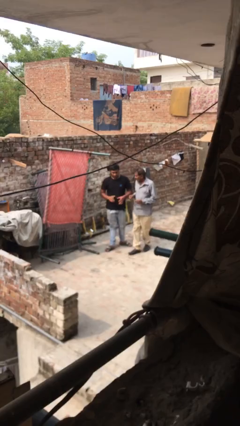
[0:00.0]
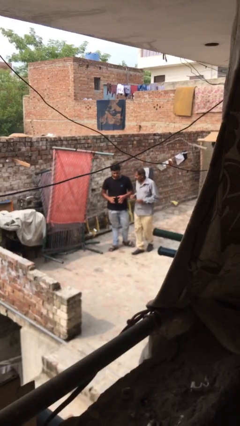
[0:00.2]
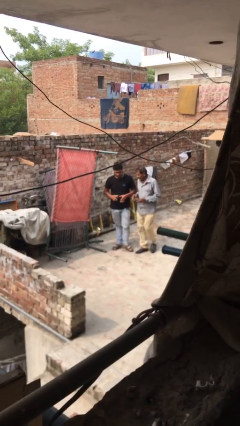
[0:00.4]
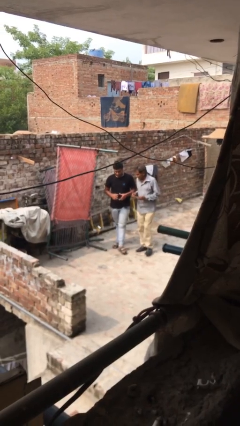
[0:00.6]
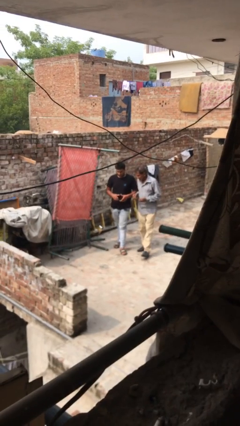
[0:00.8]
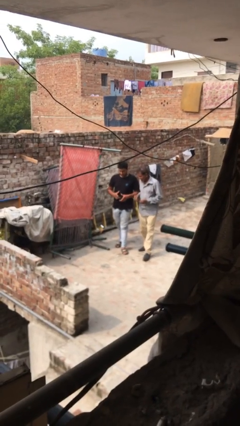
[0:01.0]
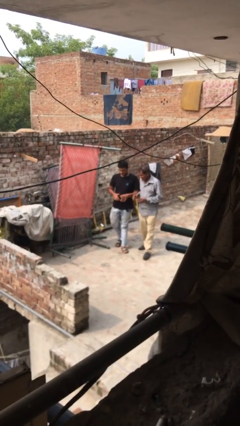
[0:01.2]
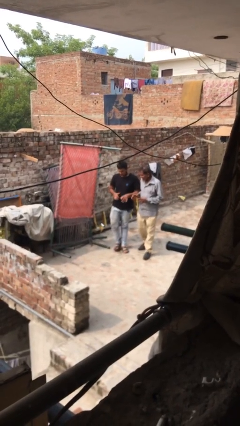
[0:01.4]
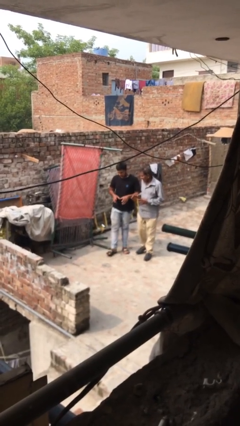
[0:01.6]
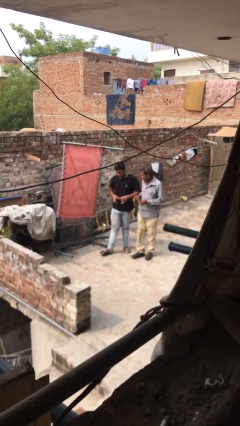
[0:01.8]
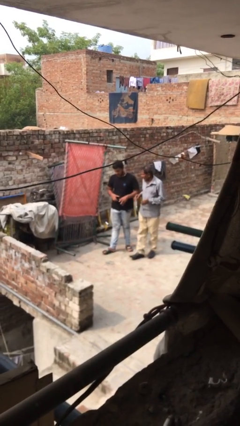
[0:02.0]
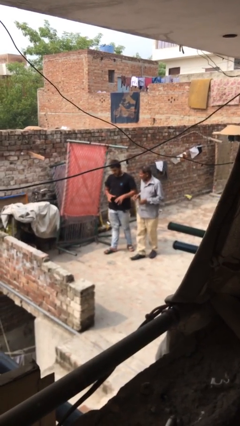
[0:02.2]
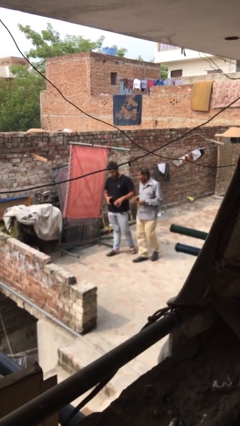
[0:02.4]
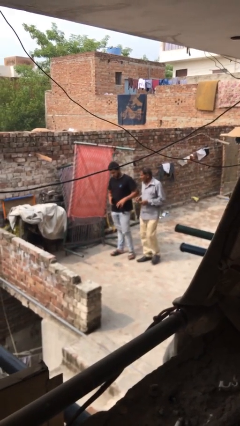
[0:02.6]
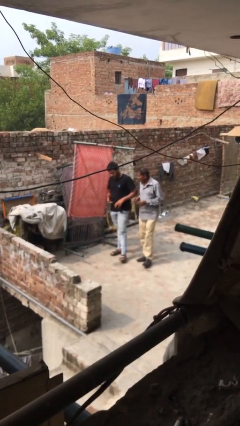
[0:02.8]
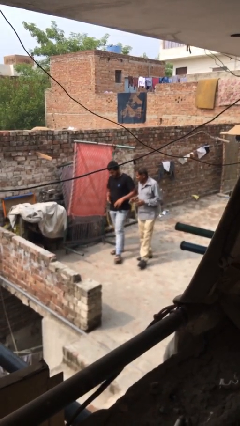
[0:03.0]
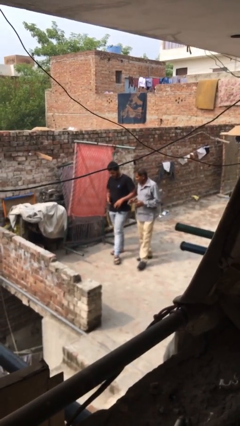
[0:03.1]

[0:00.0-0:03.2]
person talks to person

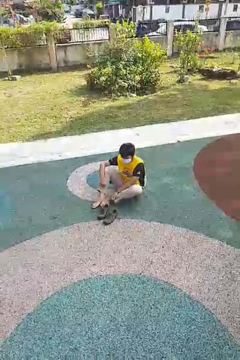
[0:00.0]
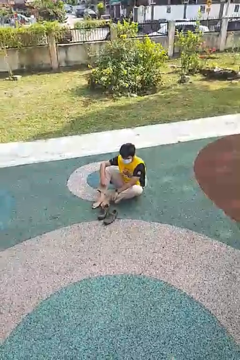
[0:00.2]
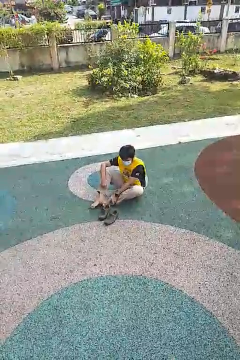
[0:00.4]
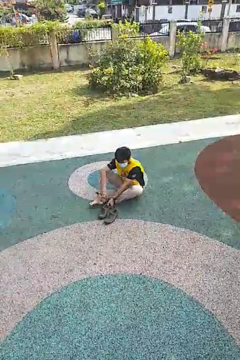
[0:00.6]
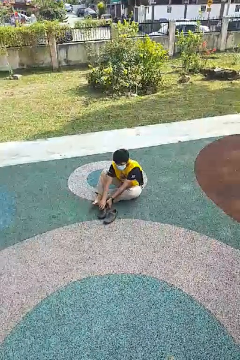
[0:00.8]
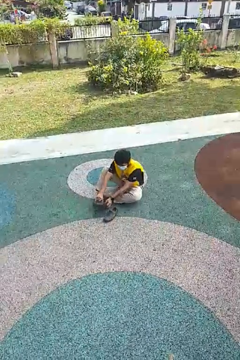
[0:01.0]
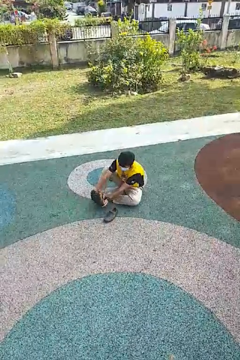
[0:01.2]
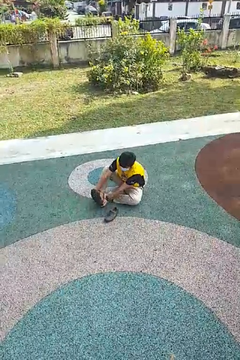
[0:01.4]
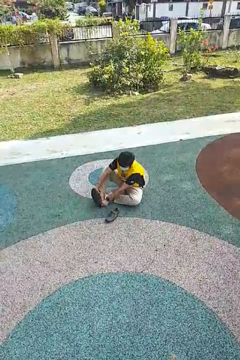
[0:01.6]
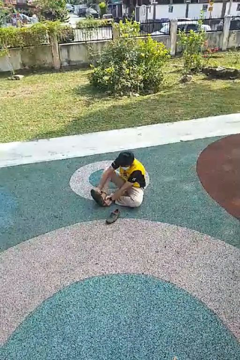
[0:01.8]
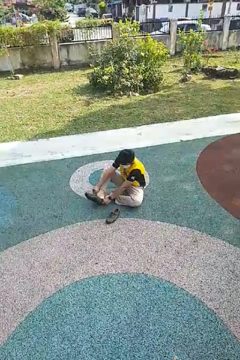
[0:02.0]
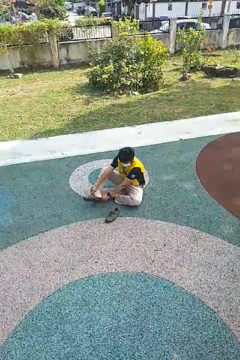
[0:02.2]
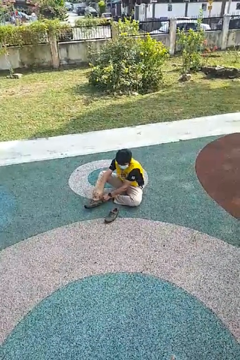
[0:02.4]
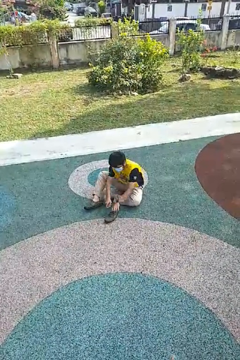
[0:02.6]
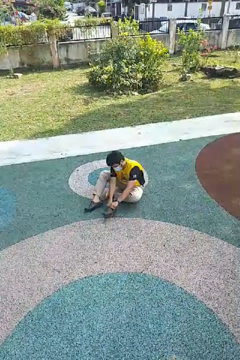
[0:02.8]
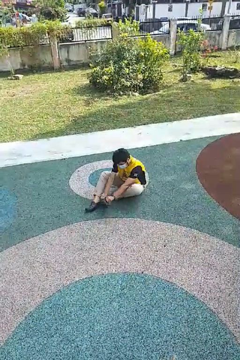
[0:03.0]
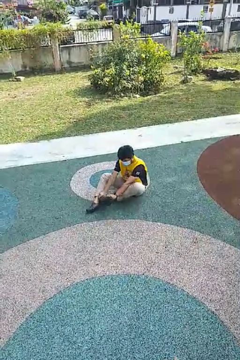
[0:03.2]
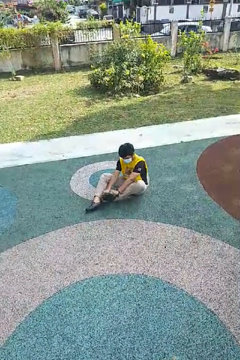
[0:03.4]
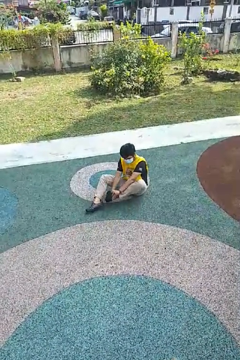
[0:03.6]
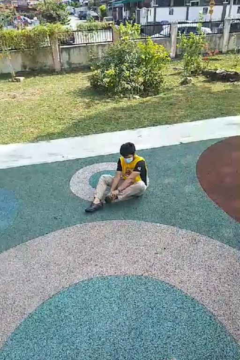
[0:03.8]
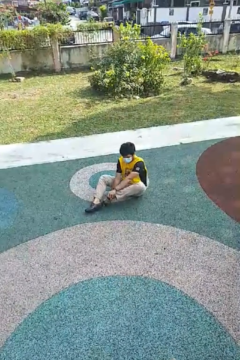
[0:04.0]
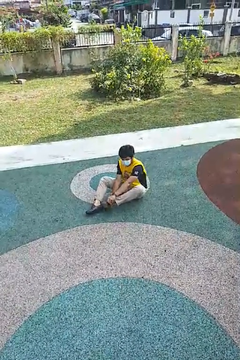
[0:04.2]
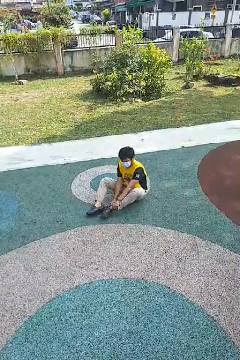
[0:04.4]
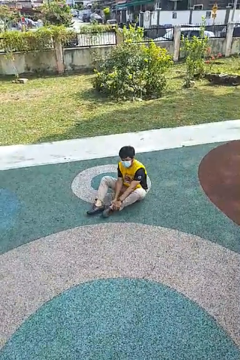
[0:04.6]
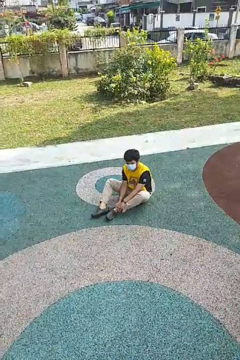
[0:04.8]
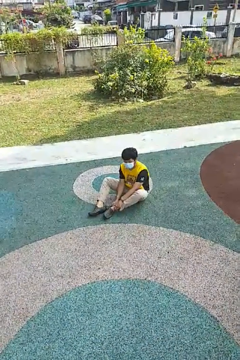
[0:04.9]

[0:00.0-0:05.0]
person puts on shoes

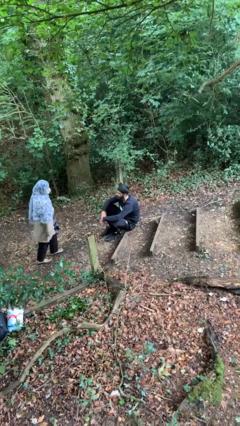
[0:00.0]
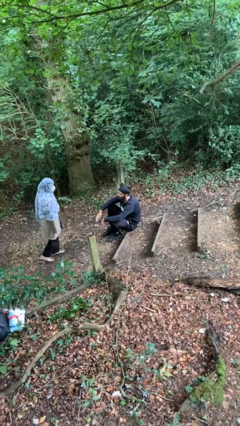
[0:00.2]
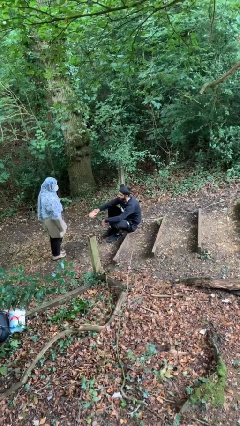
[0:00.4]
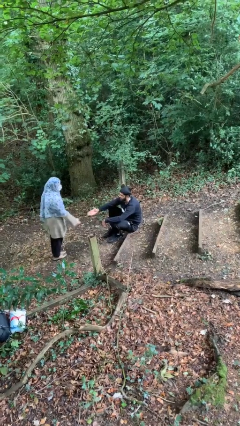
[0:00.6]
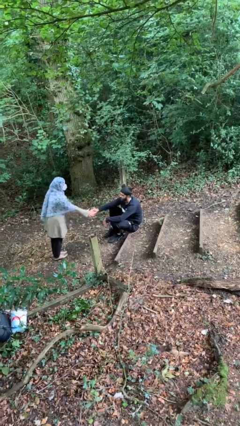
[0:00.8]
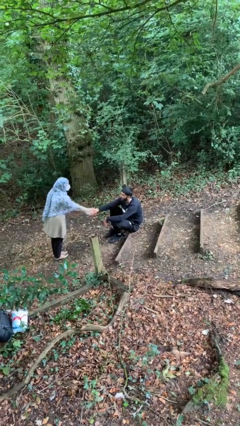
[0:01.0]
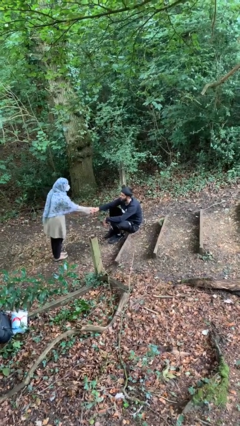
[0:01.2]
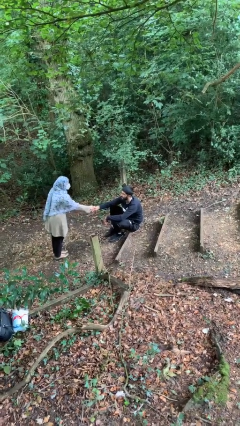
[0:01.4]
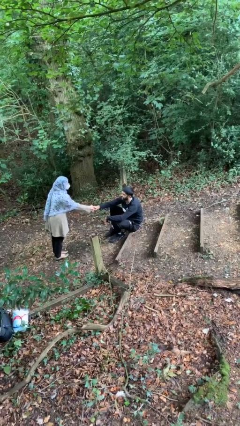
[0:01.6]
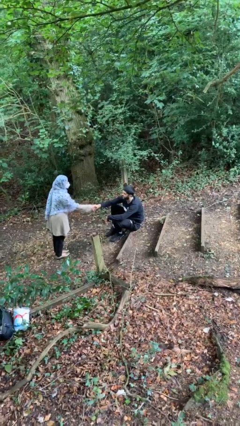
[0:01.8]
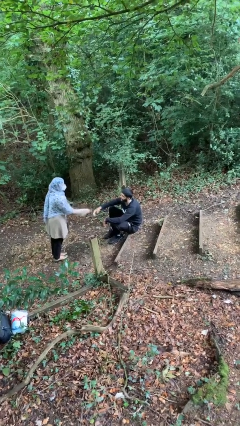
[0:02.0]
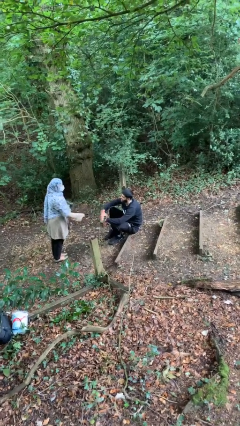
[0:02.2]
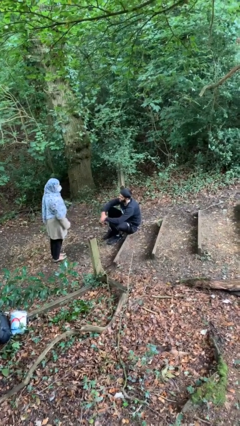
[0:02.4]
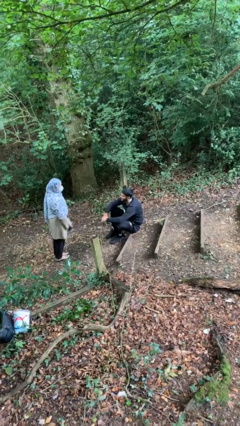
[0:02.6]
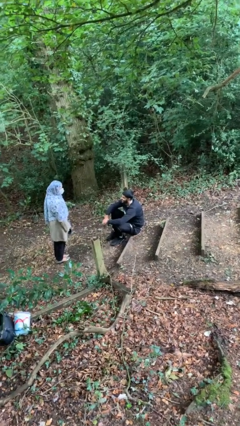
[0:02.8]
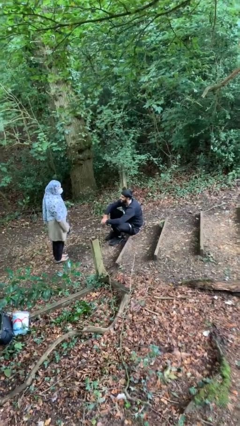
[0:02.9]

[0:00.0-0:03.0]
person shakes hand

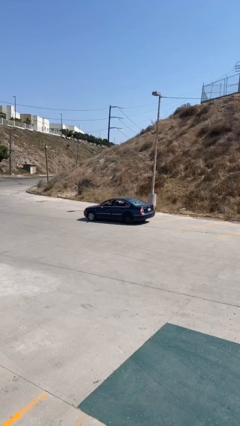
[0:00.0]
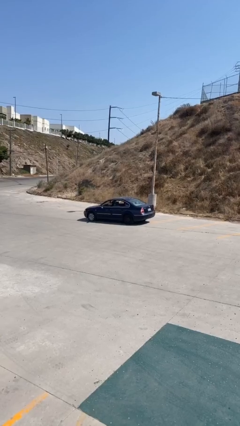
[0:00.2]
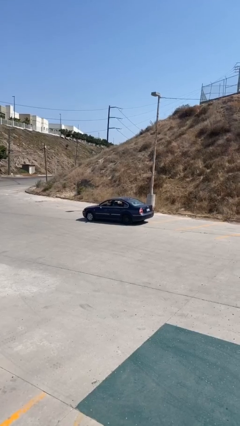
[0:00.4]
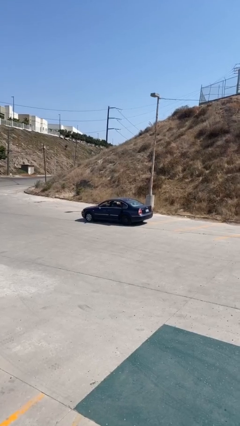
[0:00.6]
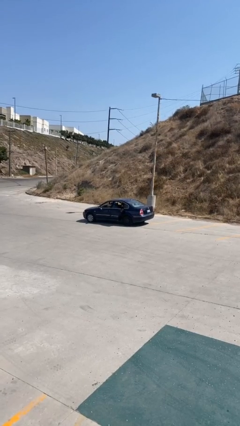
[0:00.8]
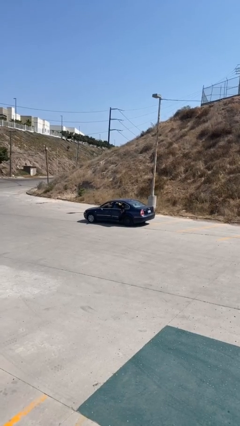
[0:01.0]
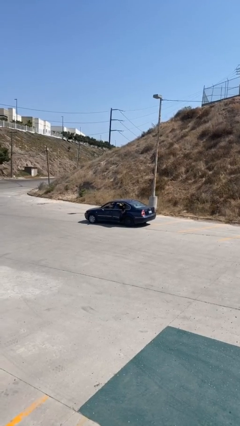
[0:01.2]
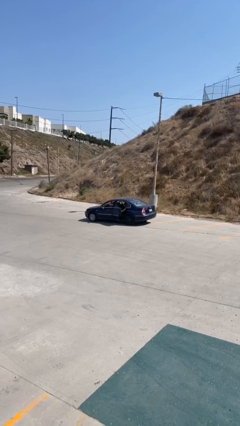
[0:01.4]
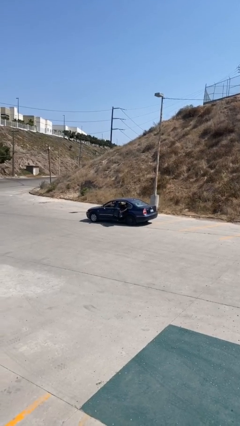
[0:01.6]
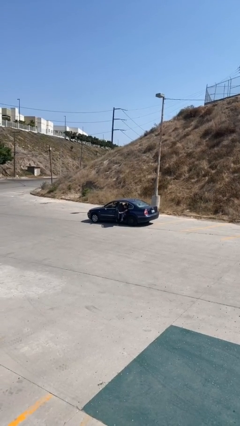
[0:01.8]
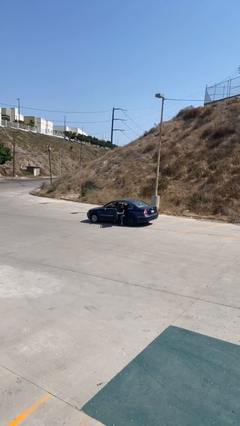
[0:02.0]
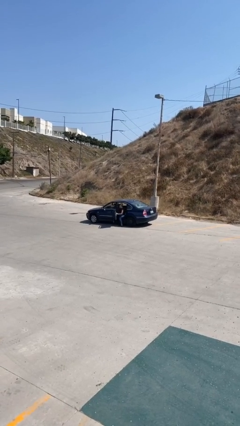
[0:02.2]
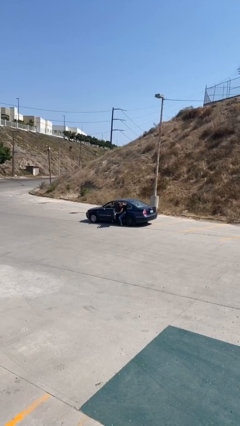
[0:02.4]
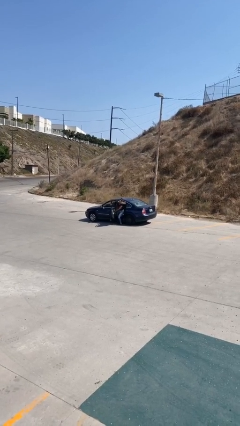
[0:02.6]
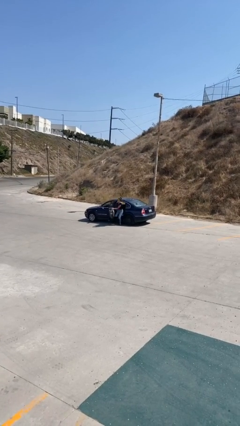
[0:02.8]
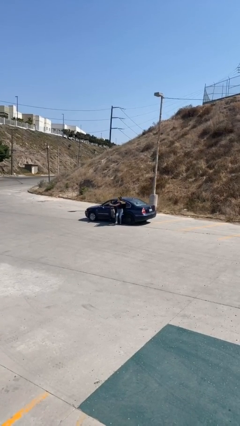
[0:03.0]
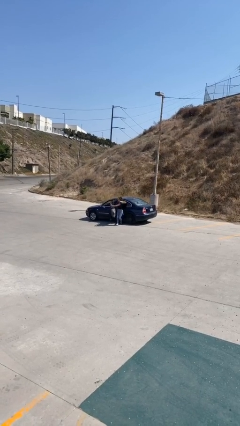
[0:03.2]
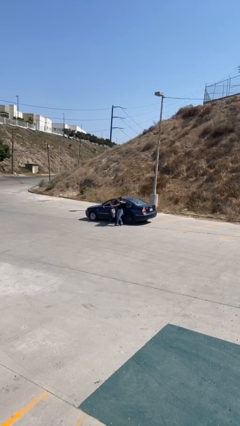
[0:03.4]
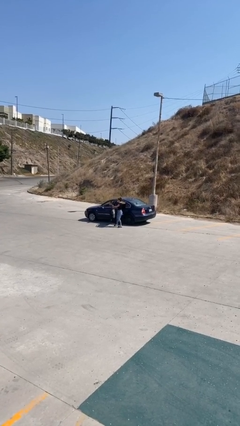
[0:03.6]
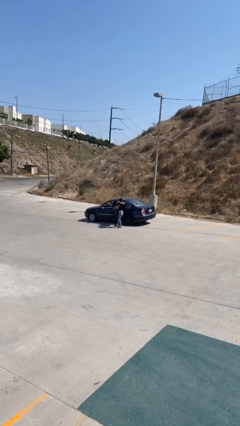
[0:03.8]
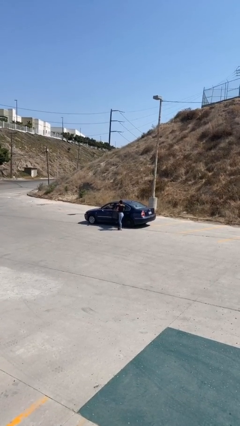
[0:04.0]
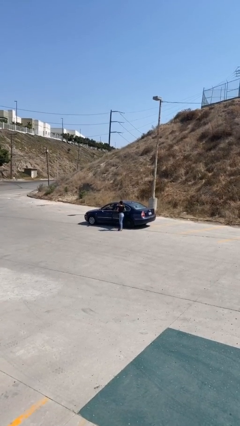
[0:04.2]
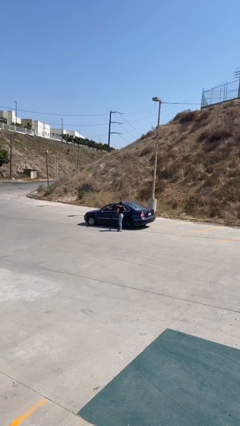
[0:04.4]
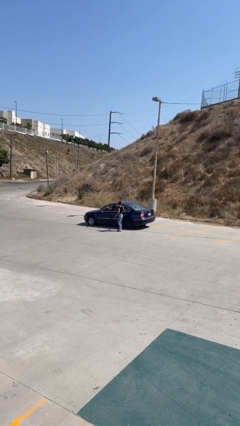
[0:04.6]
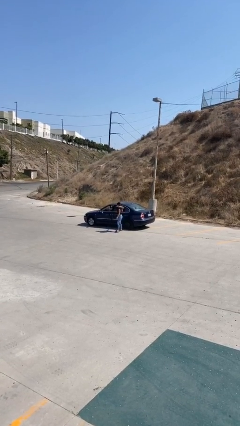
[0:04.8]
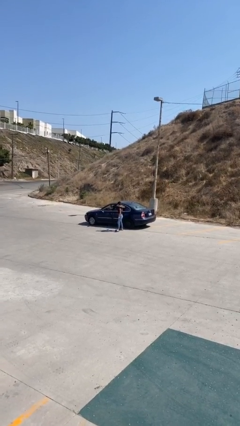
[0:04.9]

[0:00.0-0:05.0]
car drops off person

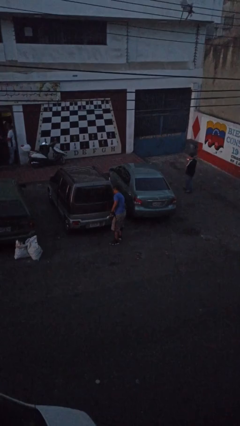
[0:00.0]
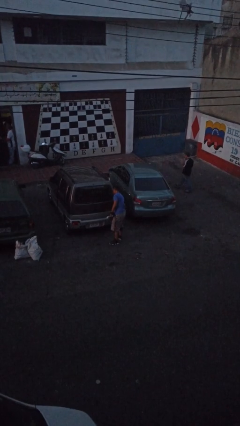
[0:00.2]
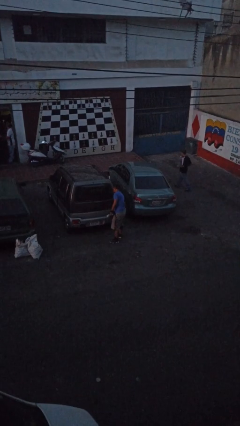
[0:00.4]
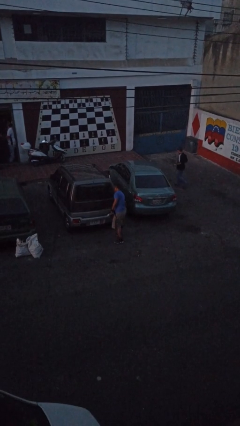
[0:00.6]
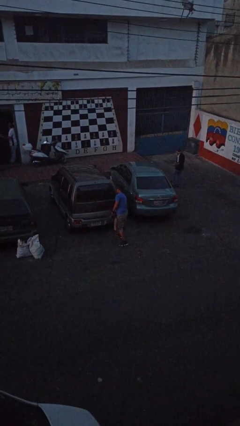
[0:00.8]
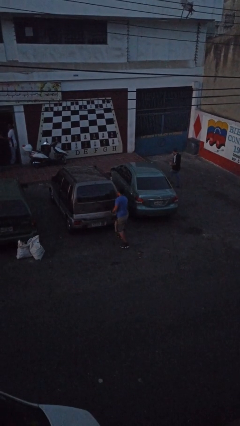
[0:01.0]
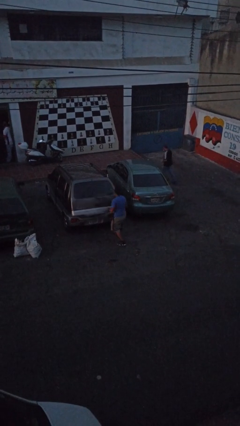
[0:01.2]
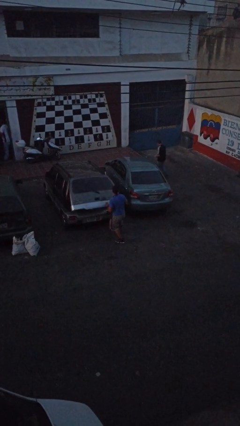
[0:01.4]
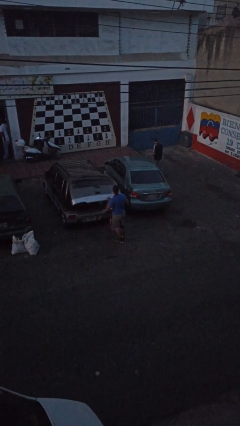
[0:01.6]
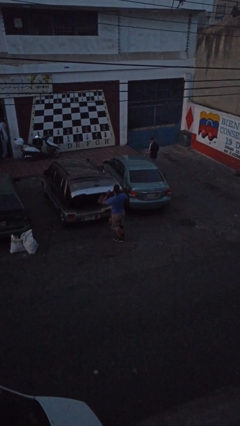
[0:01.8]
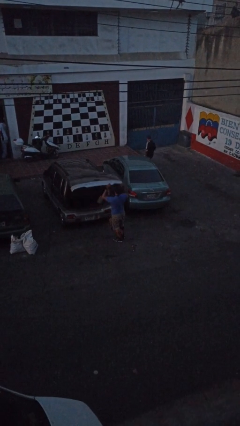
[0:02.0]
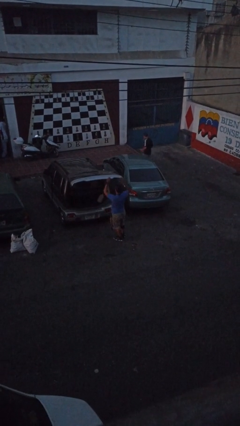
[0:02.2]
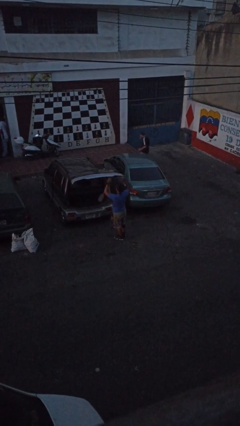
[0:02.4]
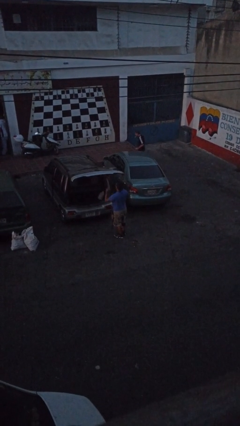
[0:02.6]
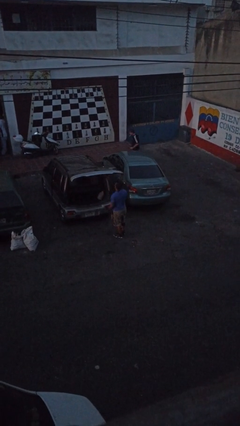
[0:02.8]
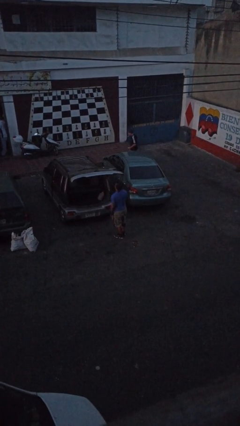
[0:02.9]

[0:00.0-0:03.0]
person opens car trunk
